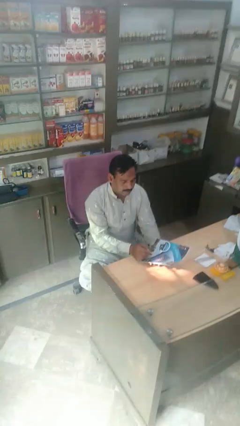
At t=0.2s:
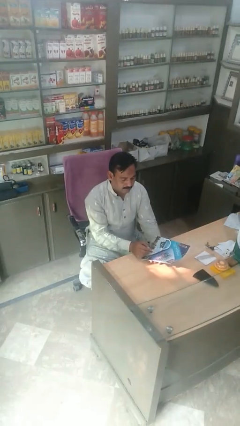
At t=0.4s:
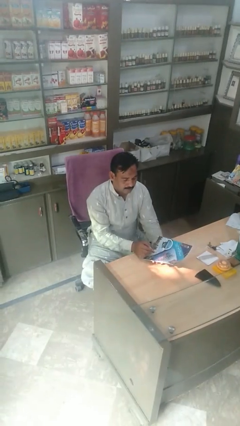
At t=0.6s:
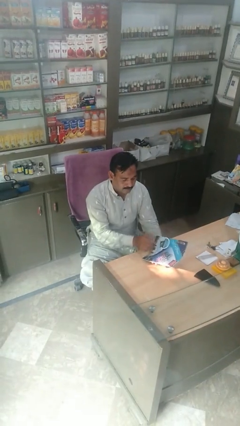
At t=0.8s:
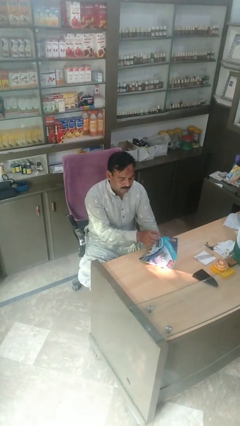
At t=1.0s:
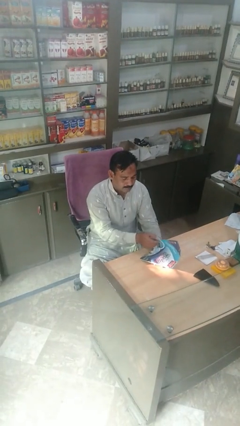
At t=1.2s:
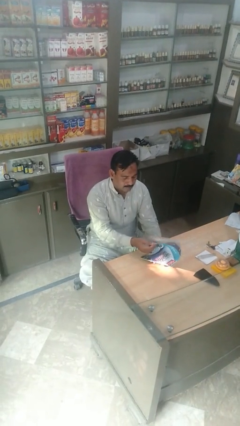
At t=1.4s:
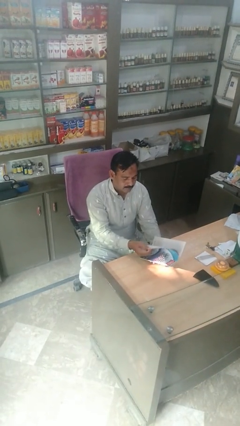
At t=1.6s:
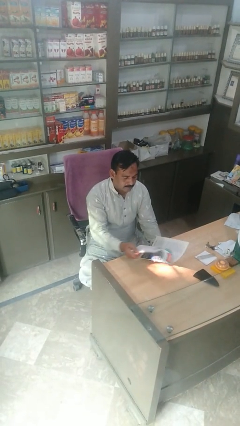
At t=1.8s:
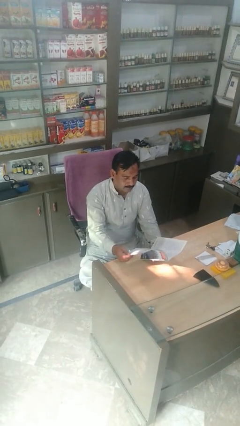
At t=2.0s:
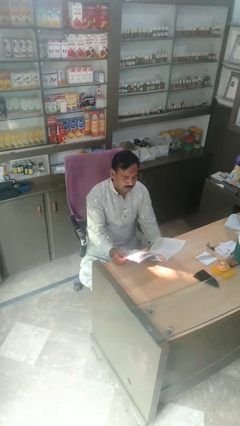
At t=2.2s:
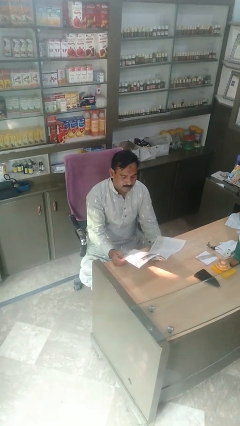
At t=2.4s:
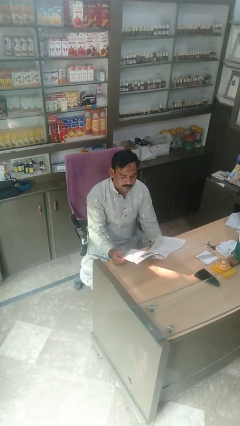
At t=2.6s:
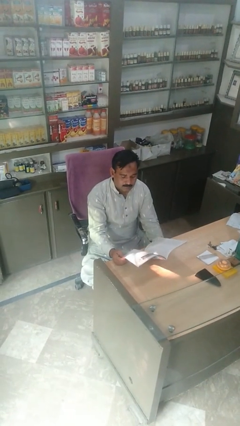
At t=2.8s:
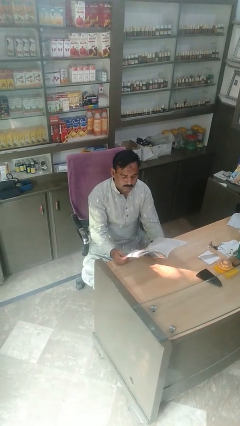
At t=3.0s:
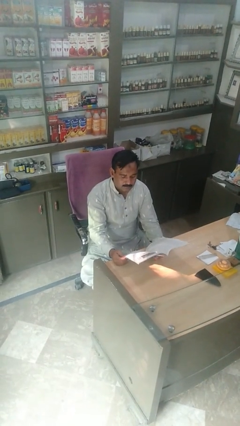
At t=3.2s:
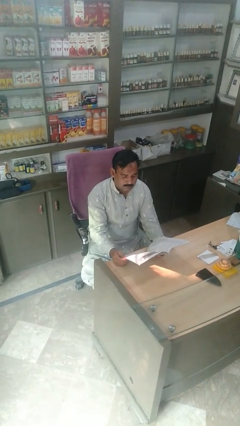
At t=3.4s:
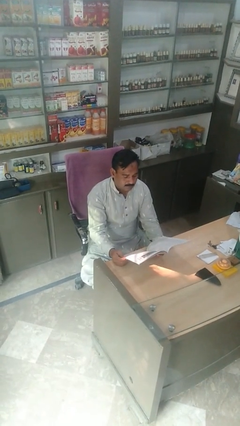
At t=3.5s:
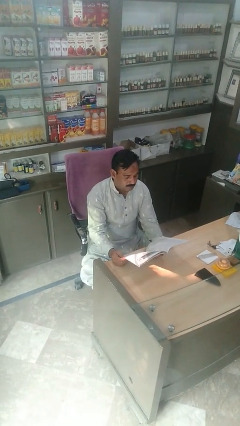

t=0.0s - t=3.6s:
person reads magazine

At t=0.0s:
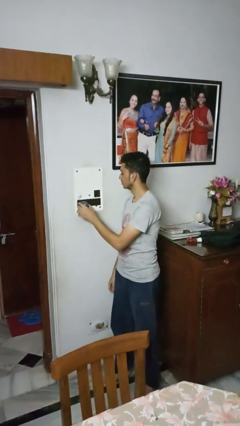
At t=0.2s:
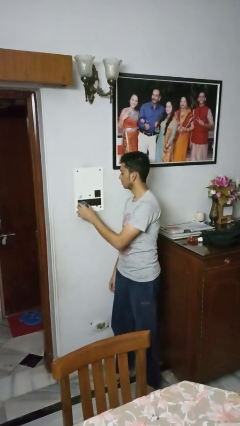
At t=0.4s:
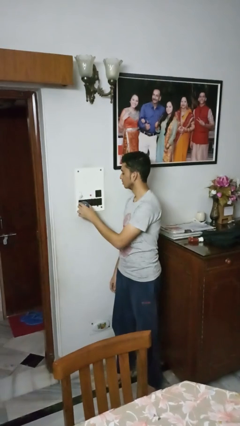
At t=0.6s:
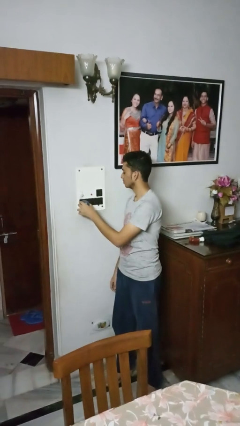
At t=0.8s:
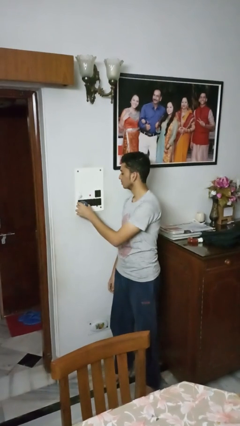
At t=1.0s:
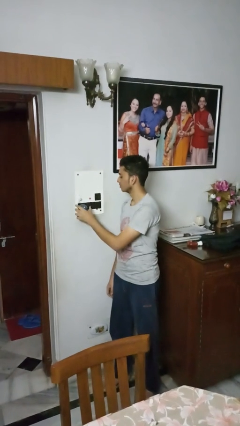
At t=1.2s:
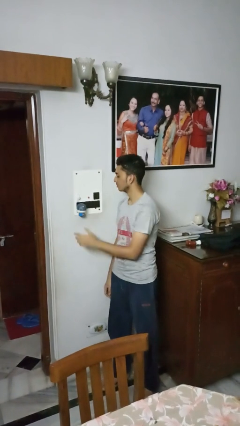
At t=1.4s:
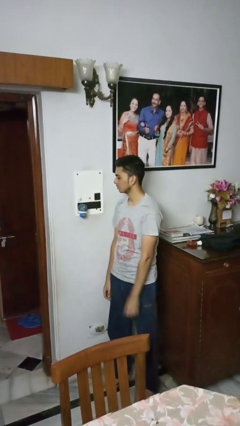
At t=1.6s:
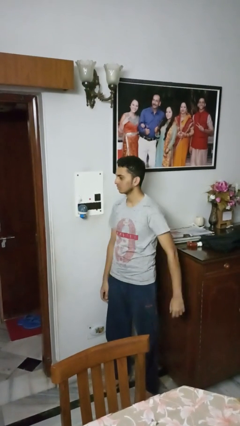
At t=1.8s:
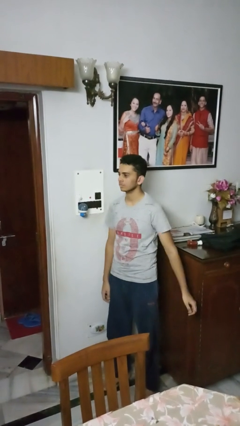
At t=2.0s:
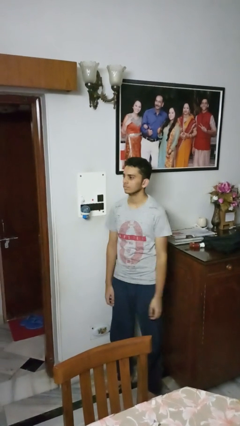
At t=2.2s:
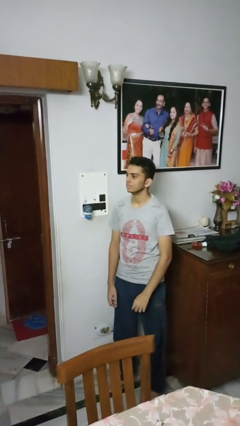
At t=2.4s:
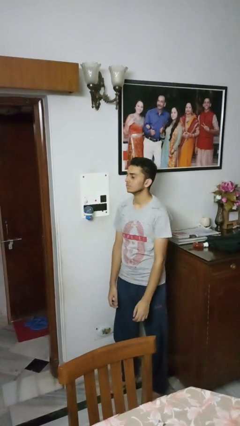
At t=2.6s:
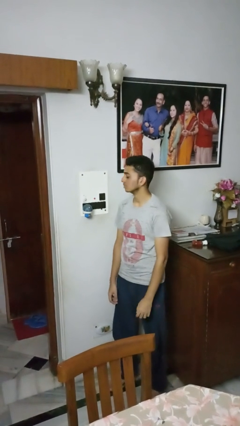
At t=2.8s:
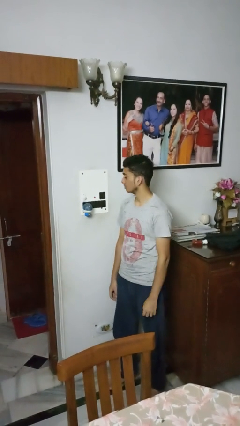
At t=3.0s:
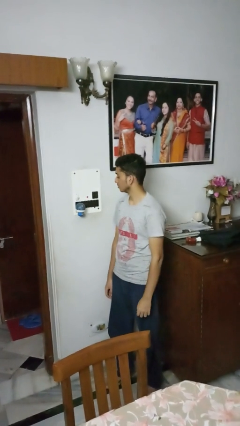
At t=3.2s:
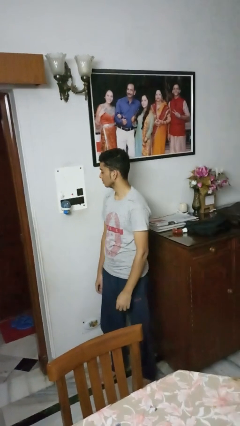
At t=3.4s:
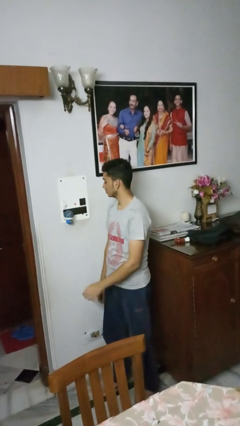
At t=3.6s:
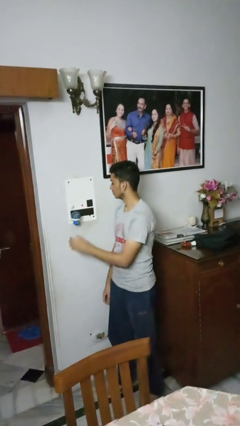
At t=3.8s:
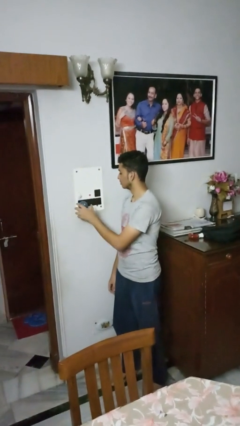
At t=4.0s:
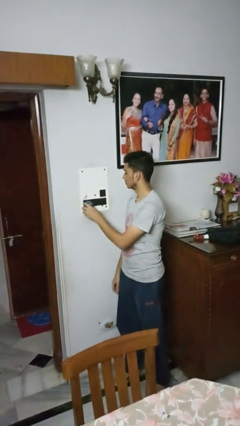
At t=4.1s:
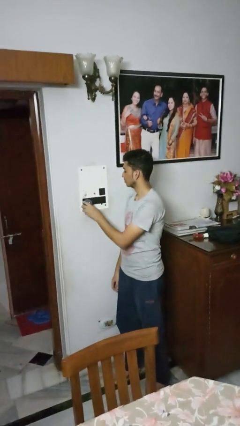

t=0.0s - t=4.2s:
person plugs into electrical socket

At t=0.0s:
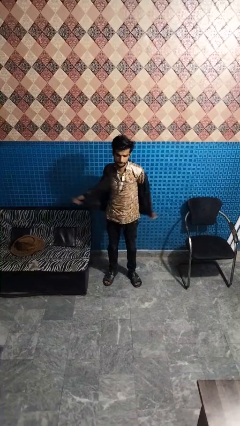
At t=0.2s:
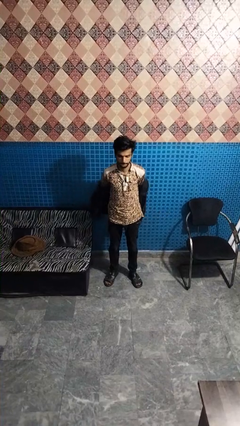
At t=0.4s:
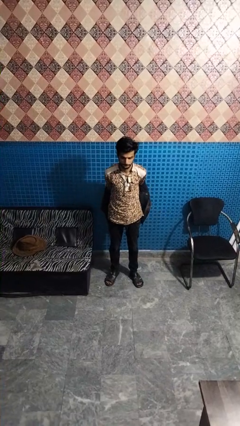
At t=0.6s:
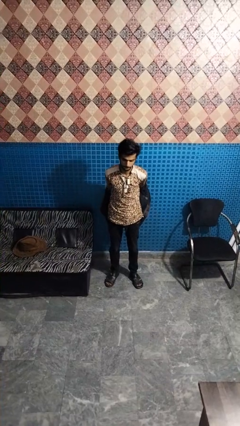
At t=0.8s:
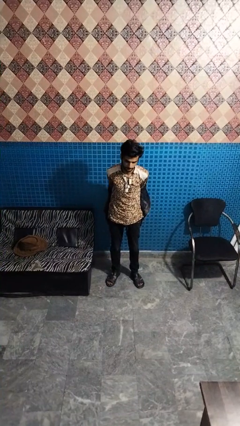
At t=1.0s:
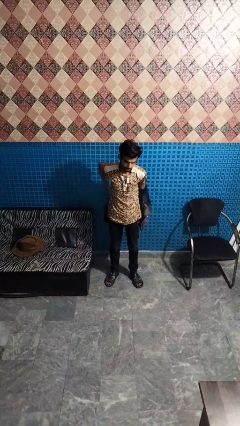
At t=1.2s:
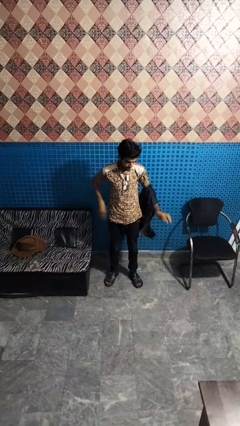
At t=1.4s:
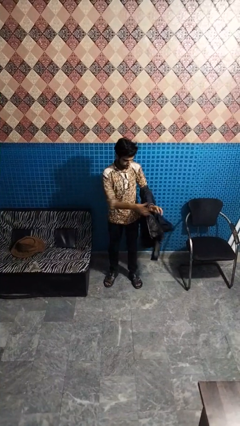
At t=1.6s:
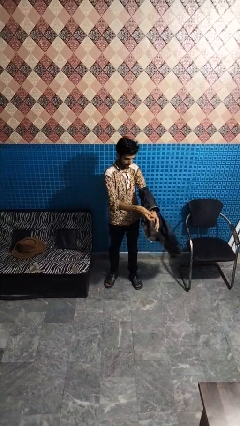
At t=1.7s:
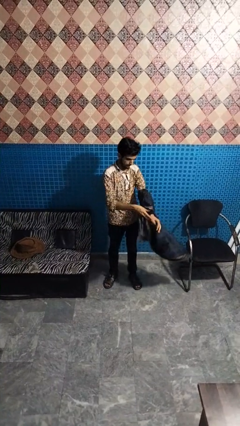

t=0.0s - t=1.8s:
person takes off jacket

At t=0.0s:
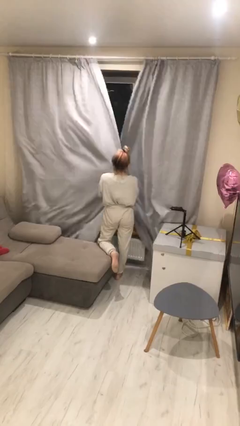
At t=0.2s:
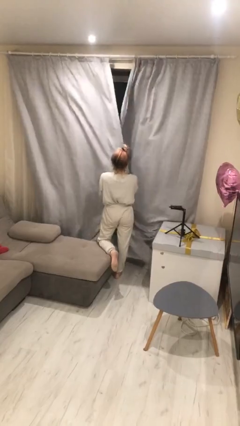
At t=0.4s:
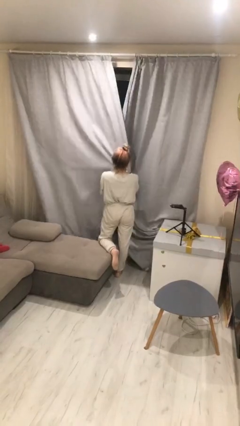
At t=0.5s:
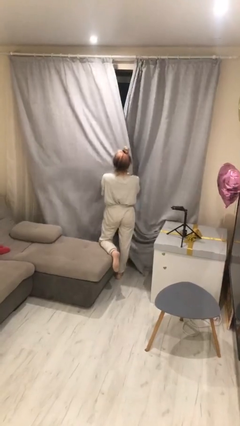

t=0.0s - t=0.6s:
person closes curtains

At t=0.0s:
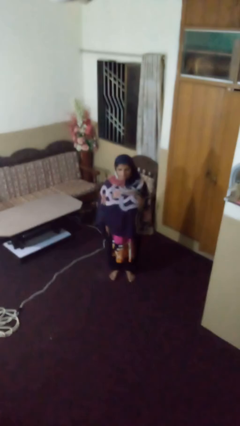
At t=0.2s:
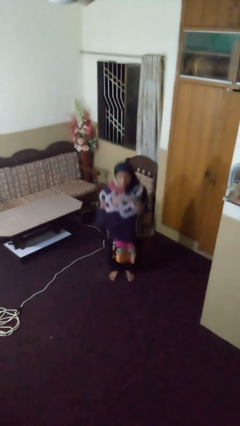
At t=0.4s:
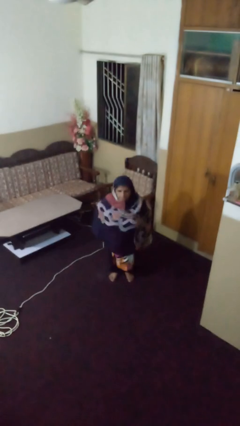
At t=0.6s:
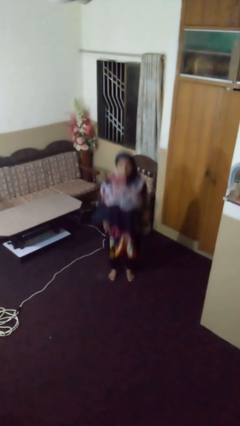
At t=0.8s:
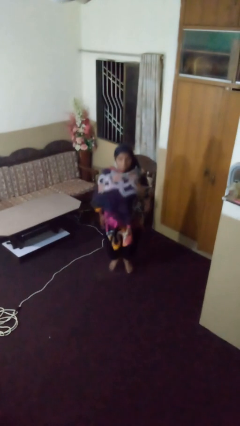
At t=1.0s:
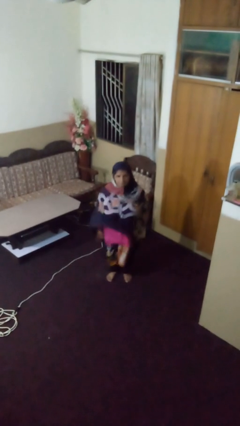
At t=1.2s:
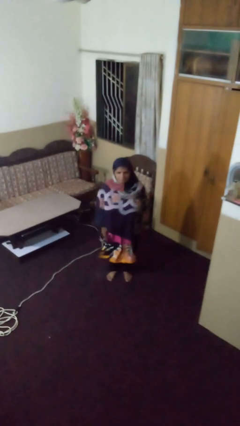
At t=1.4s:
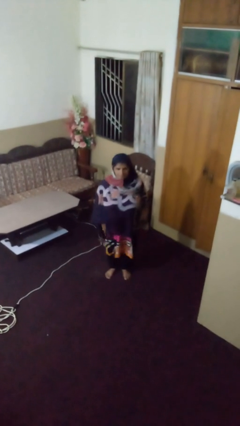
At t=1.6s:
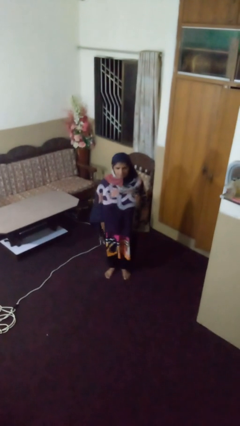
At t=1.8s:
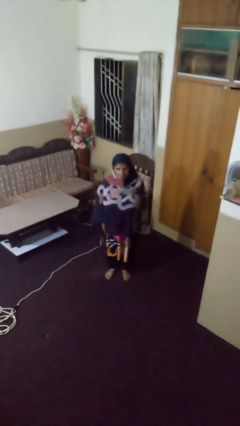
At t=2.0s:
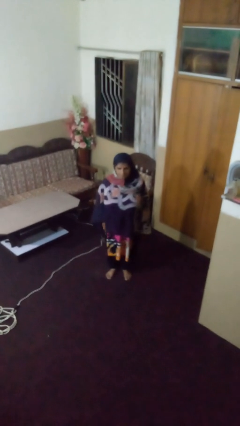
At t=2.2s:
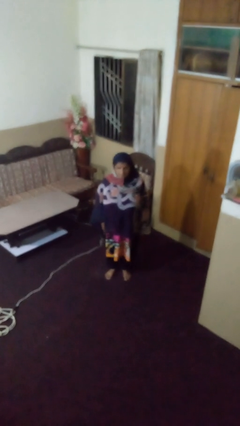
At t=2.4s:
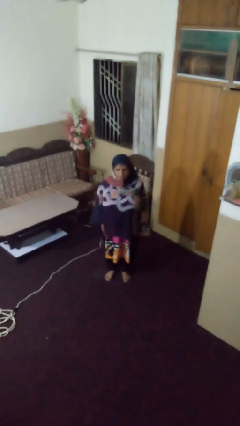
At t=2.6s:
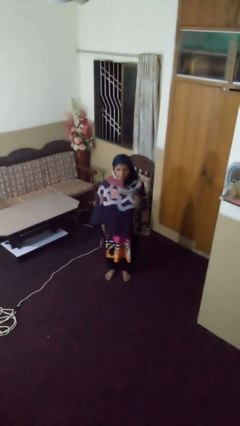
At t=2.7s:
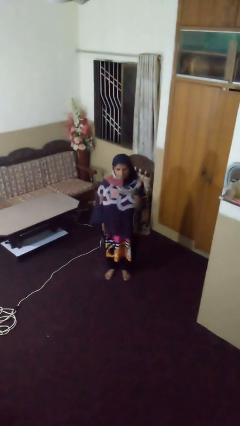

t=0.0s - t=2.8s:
person jumps

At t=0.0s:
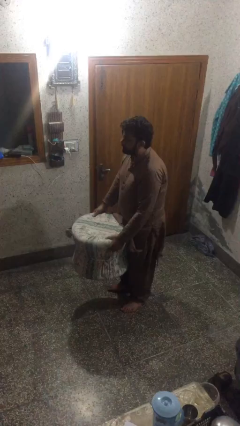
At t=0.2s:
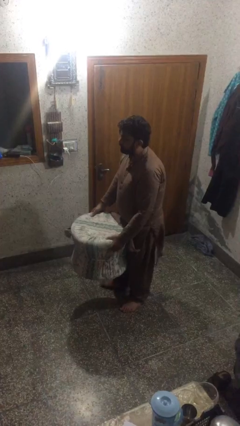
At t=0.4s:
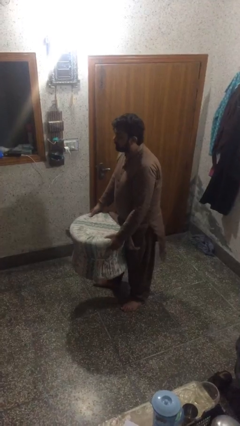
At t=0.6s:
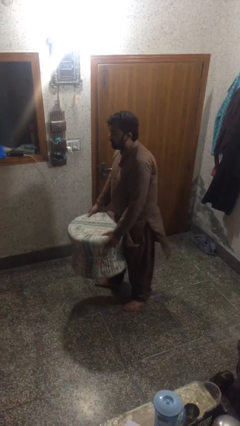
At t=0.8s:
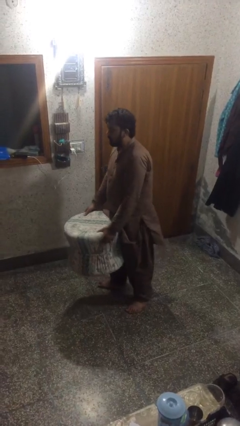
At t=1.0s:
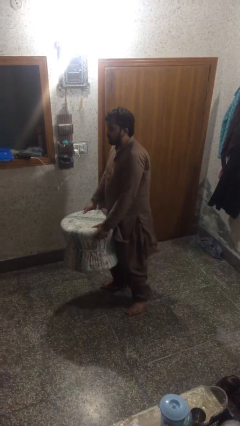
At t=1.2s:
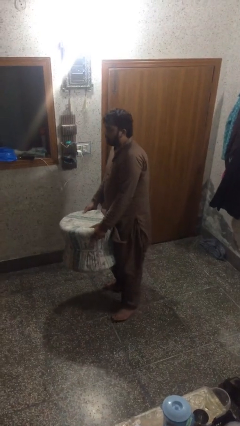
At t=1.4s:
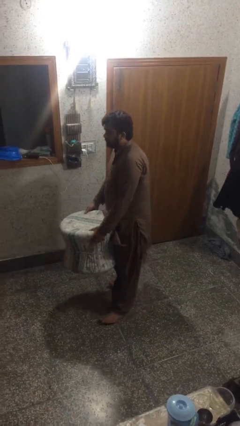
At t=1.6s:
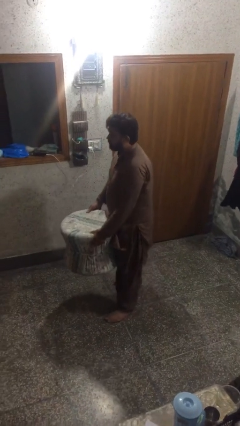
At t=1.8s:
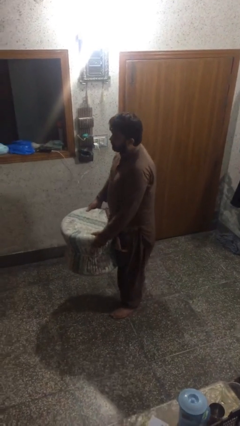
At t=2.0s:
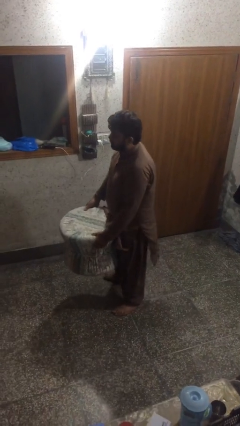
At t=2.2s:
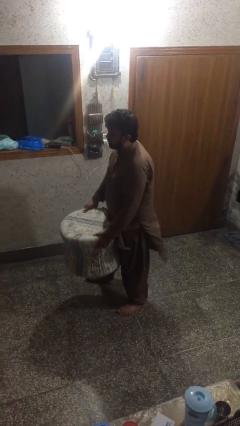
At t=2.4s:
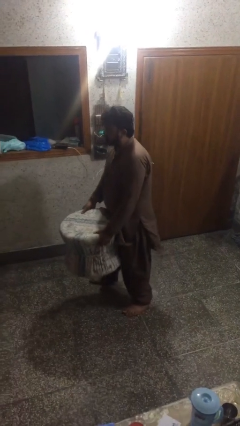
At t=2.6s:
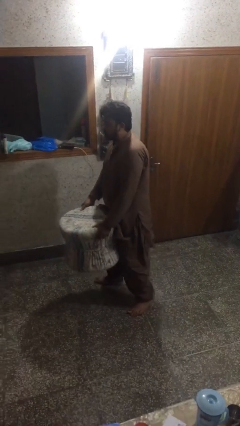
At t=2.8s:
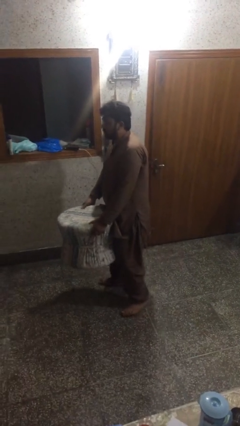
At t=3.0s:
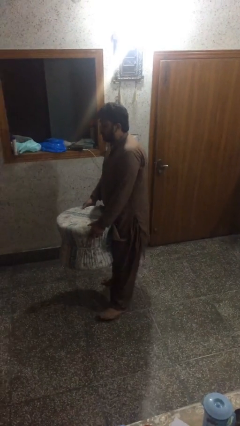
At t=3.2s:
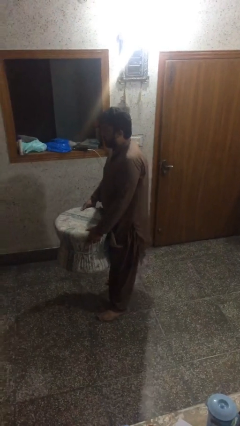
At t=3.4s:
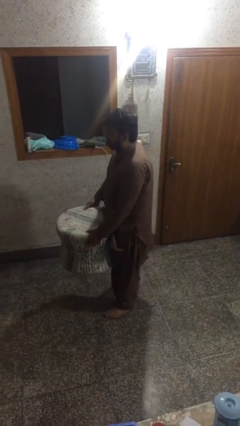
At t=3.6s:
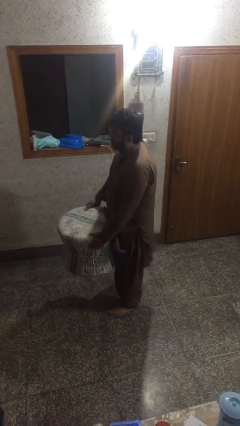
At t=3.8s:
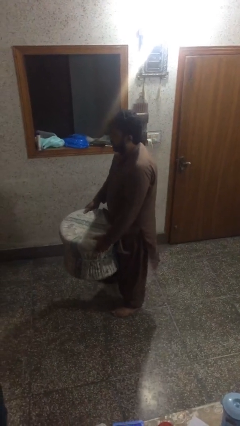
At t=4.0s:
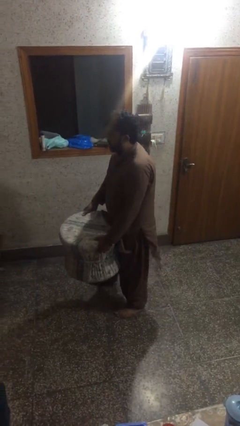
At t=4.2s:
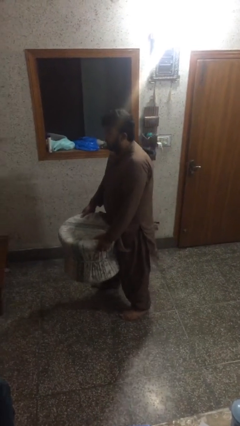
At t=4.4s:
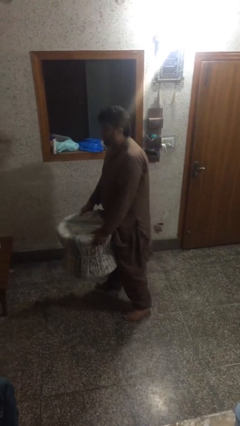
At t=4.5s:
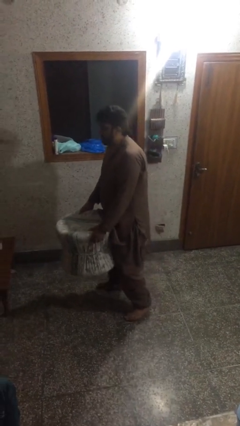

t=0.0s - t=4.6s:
person carries heavy object
